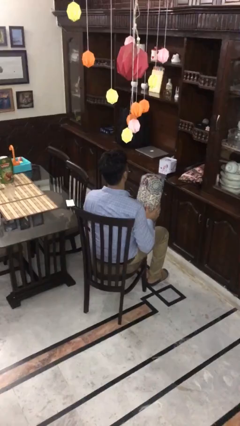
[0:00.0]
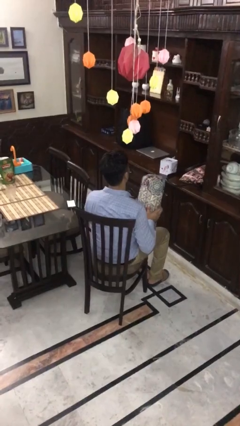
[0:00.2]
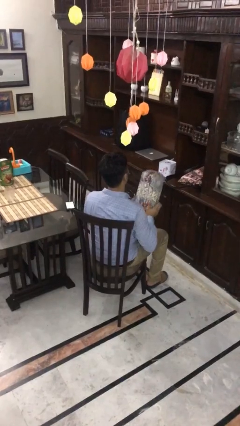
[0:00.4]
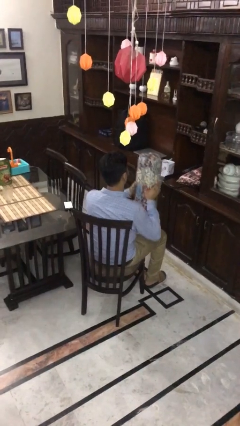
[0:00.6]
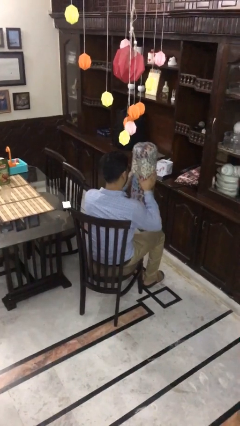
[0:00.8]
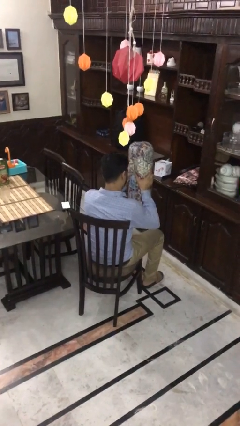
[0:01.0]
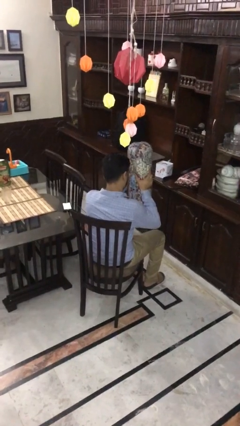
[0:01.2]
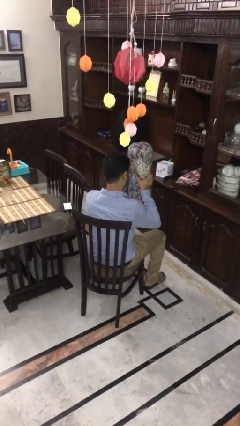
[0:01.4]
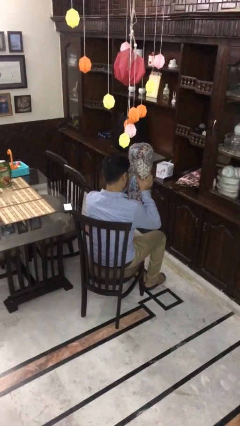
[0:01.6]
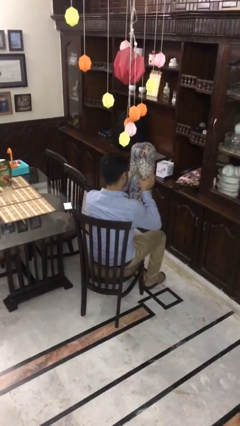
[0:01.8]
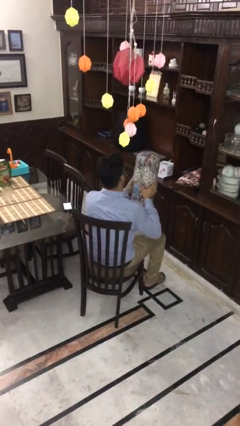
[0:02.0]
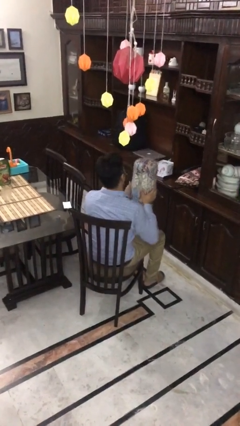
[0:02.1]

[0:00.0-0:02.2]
person squeezes object

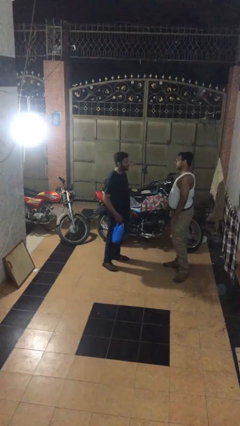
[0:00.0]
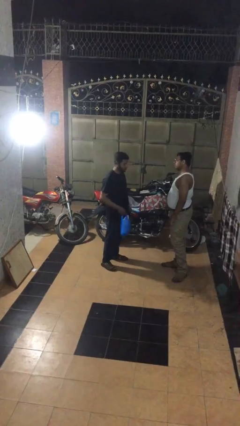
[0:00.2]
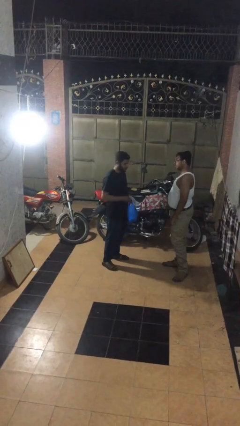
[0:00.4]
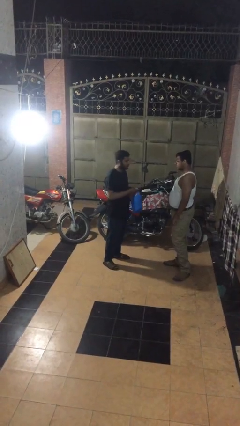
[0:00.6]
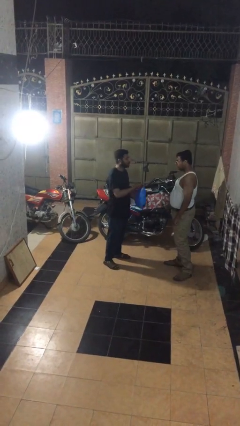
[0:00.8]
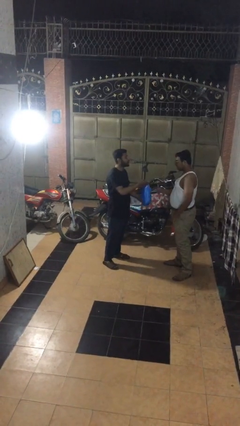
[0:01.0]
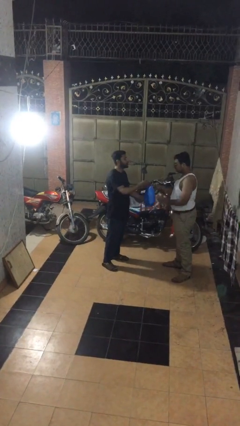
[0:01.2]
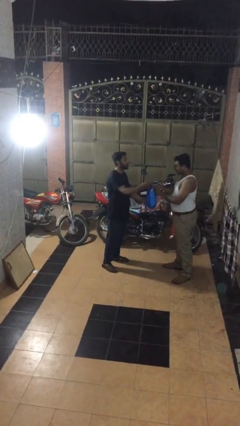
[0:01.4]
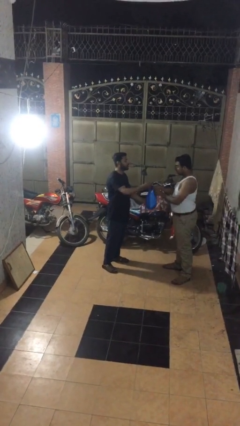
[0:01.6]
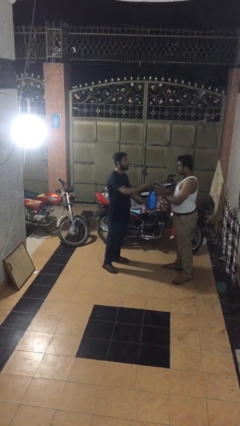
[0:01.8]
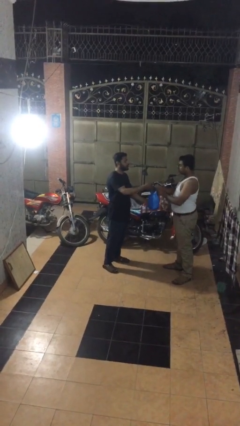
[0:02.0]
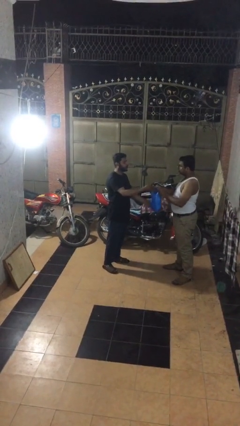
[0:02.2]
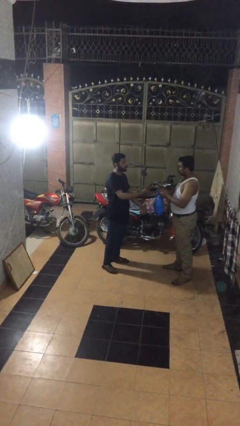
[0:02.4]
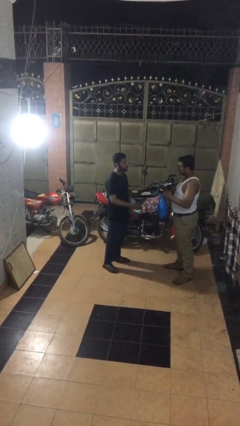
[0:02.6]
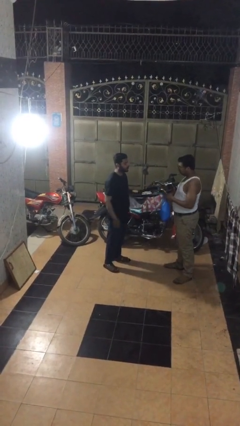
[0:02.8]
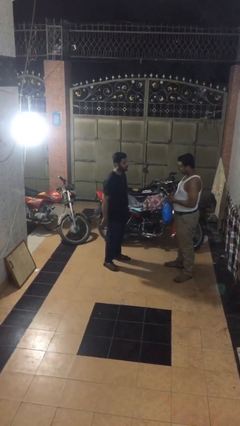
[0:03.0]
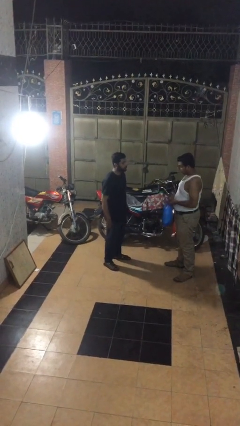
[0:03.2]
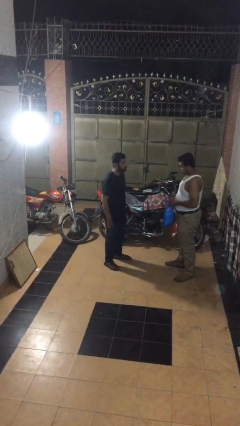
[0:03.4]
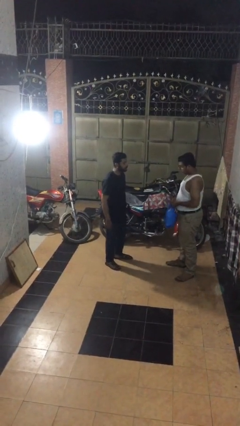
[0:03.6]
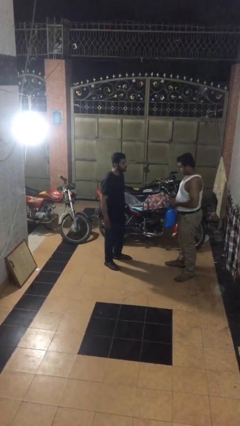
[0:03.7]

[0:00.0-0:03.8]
person transfers object to person

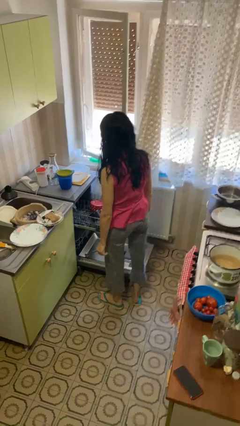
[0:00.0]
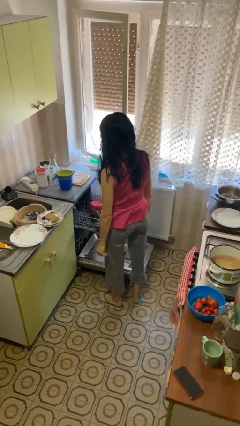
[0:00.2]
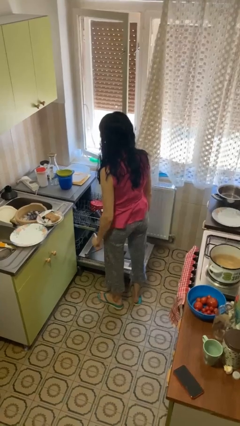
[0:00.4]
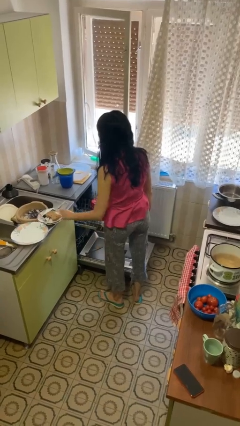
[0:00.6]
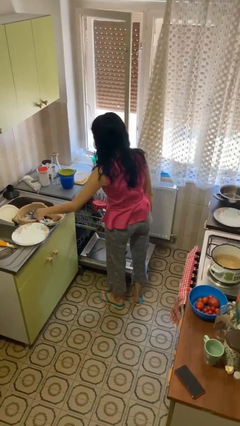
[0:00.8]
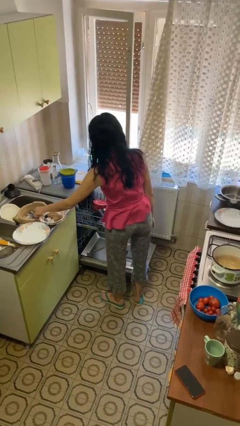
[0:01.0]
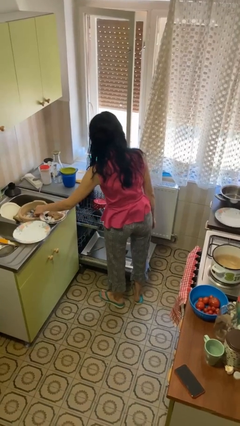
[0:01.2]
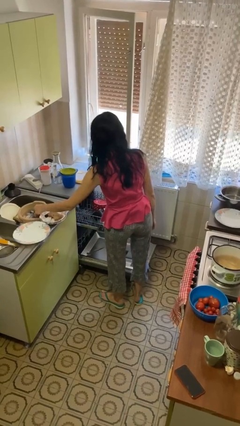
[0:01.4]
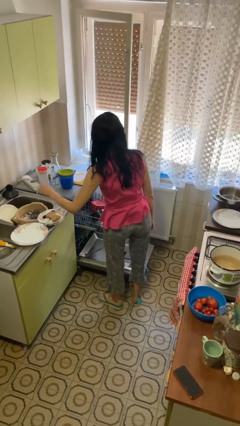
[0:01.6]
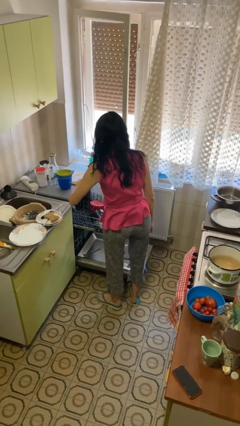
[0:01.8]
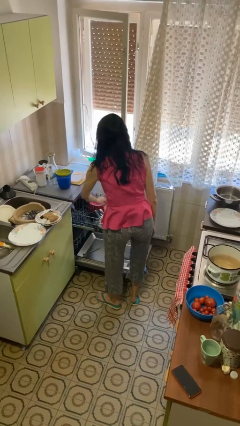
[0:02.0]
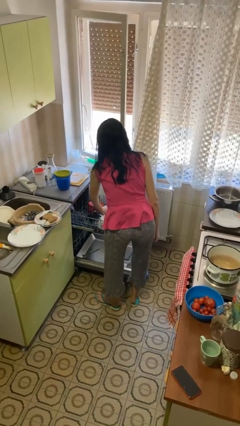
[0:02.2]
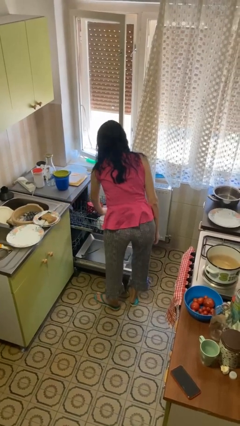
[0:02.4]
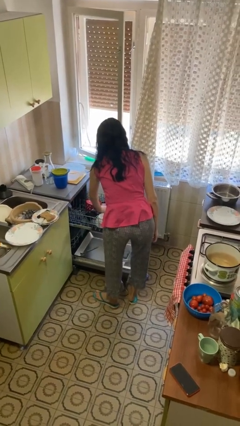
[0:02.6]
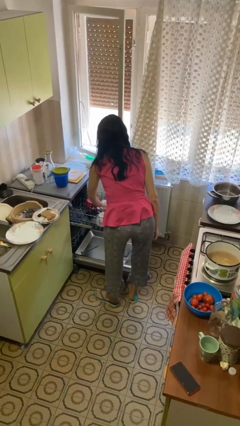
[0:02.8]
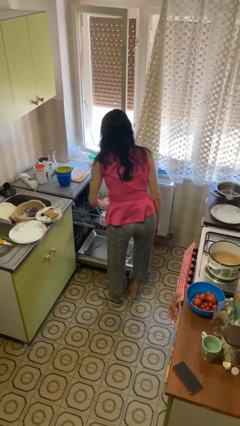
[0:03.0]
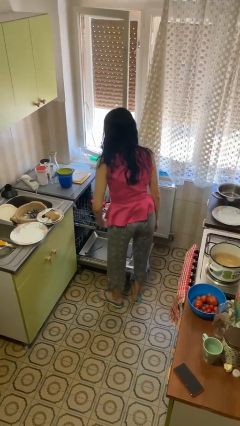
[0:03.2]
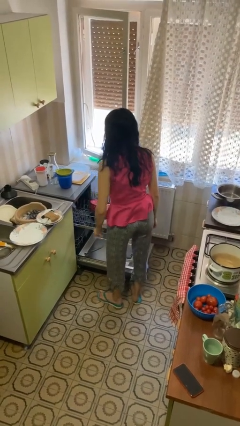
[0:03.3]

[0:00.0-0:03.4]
person loads dishwasher

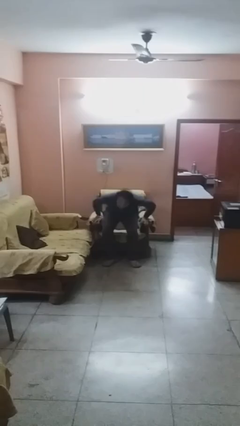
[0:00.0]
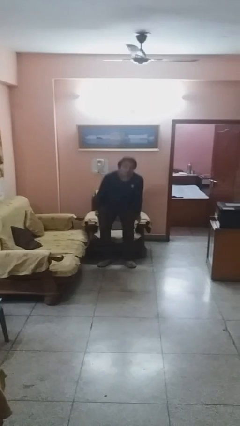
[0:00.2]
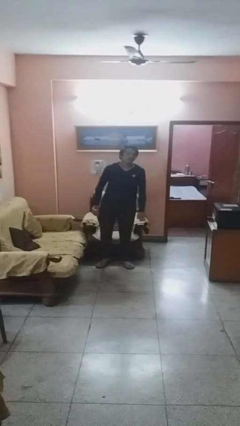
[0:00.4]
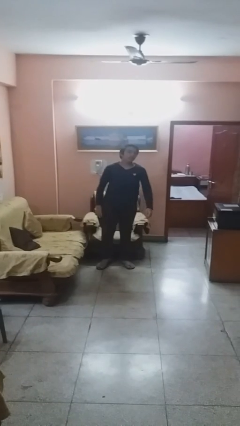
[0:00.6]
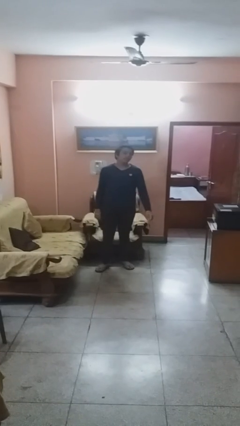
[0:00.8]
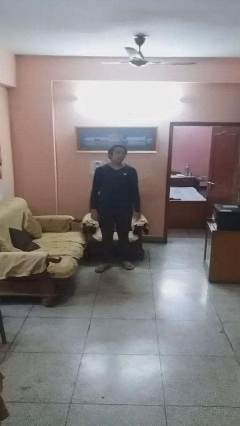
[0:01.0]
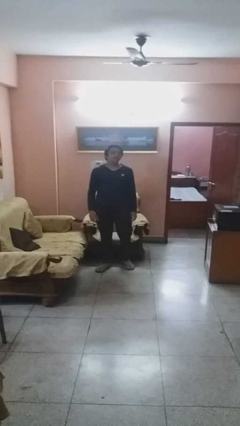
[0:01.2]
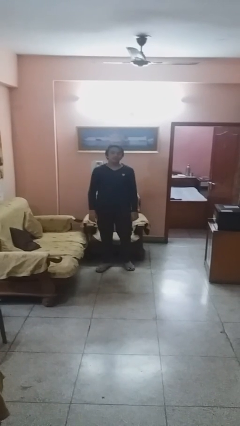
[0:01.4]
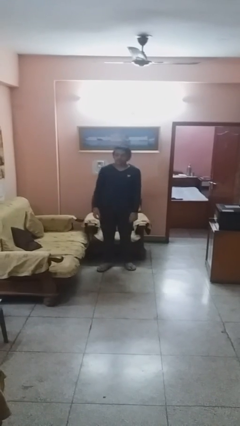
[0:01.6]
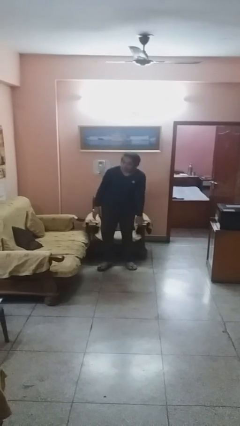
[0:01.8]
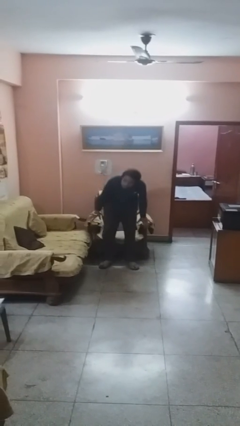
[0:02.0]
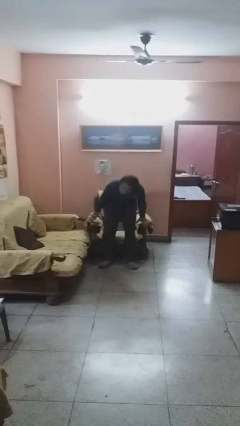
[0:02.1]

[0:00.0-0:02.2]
person stands up

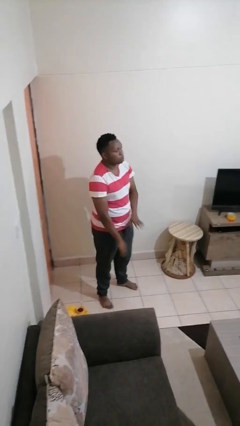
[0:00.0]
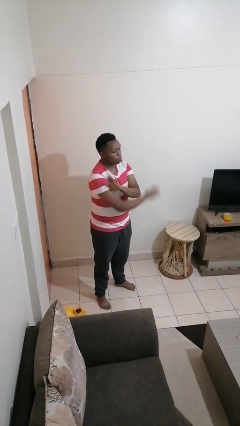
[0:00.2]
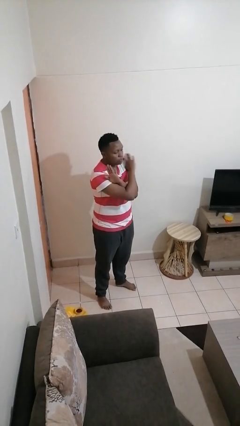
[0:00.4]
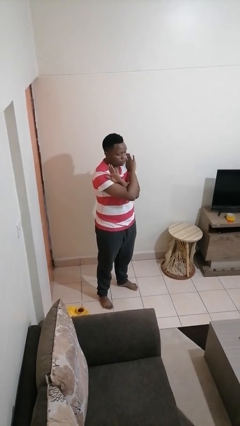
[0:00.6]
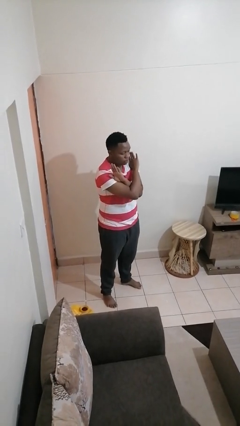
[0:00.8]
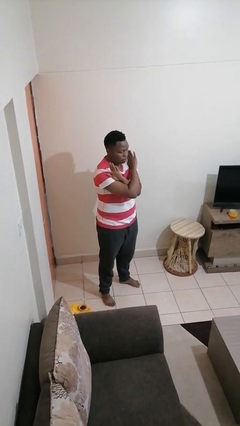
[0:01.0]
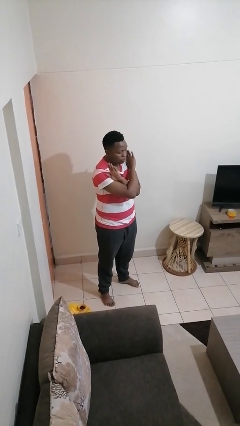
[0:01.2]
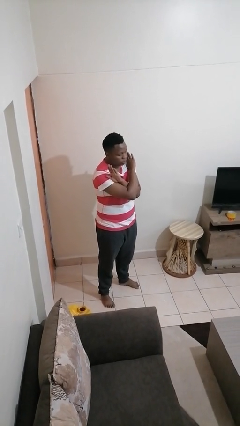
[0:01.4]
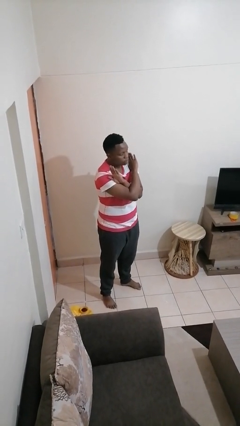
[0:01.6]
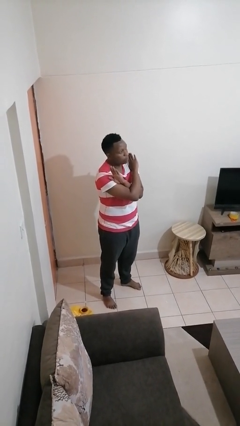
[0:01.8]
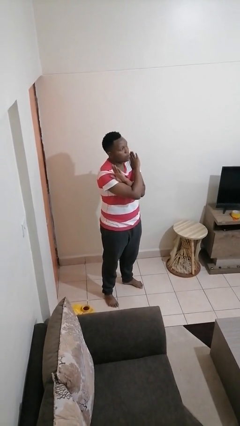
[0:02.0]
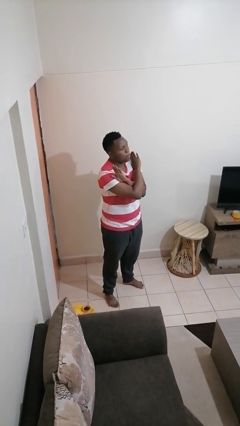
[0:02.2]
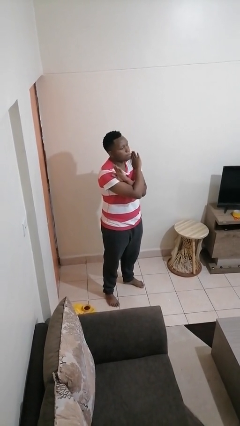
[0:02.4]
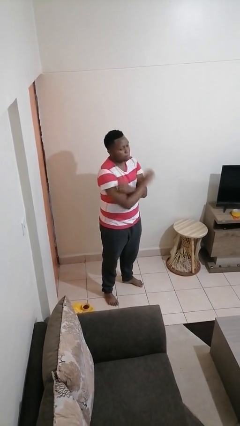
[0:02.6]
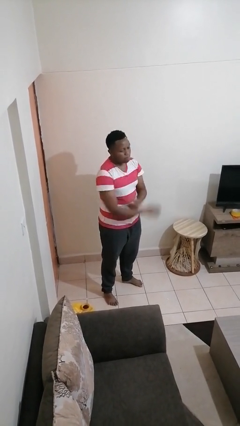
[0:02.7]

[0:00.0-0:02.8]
person gestures arms x

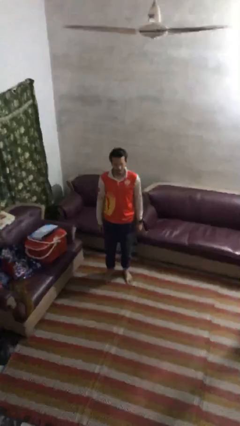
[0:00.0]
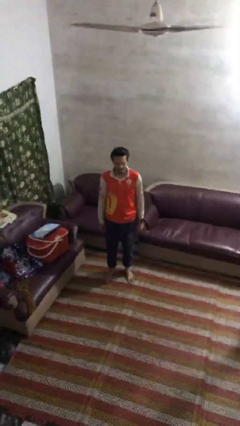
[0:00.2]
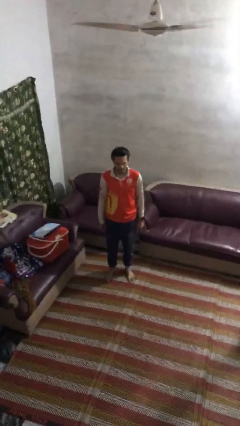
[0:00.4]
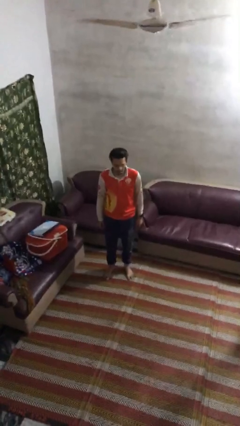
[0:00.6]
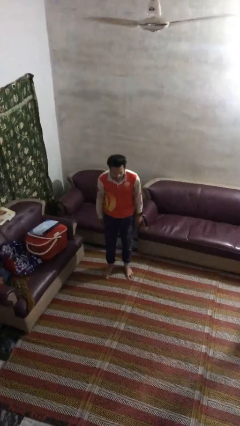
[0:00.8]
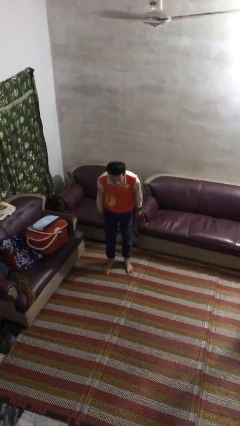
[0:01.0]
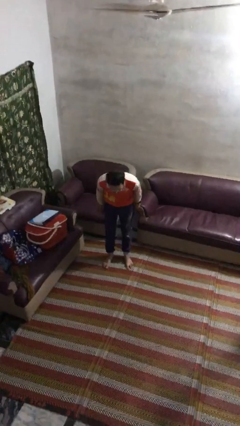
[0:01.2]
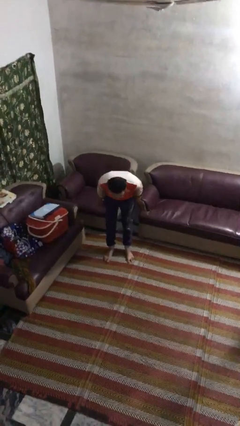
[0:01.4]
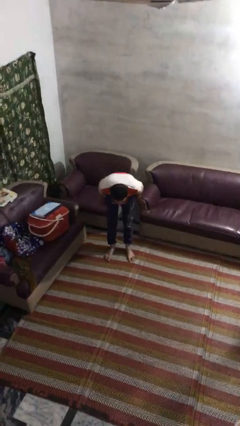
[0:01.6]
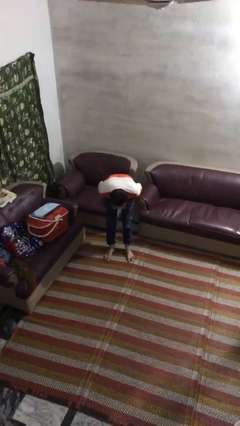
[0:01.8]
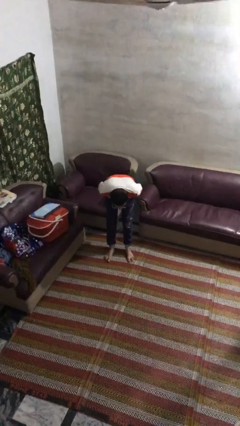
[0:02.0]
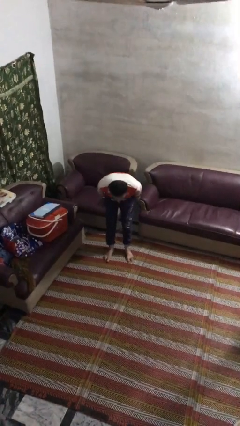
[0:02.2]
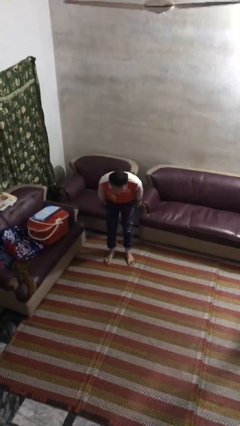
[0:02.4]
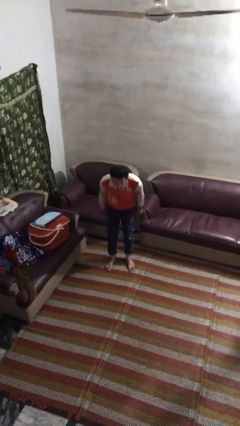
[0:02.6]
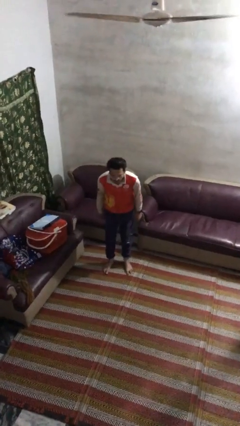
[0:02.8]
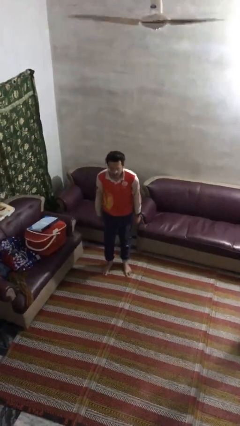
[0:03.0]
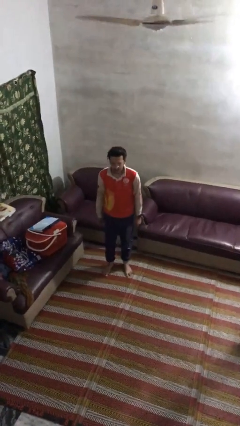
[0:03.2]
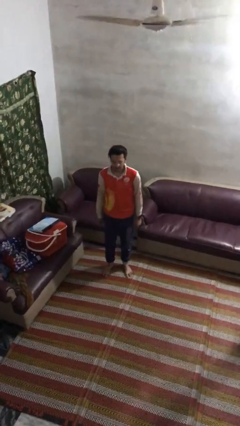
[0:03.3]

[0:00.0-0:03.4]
person bows
